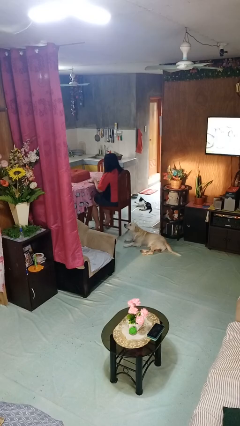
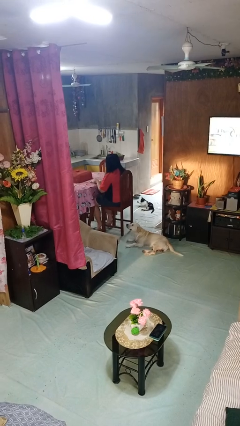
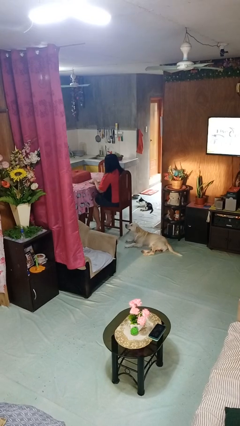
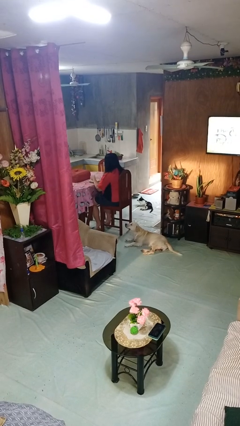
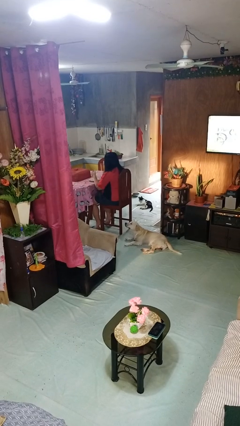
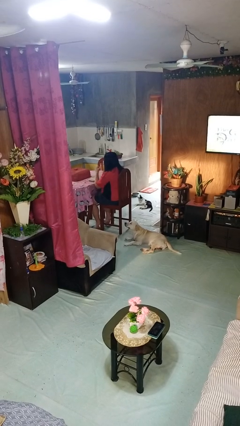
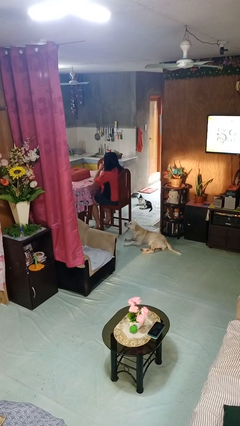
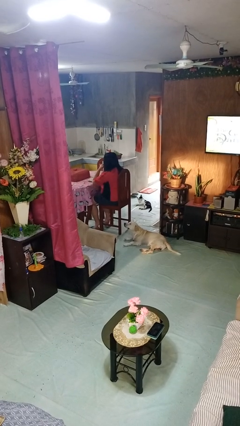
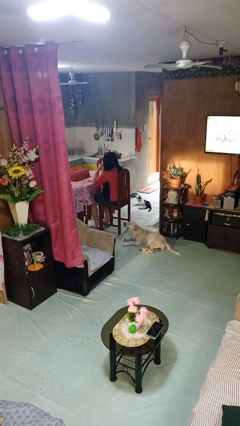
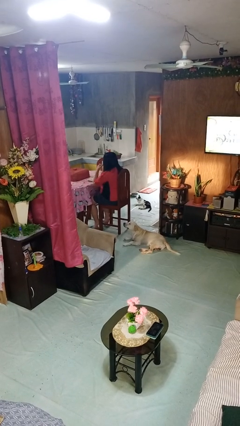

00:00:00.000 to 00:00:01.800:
person eats with hands

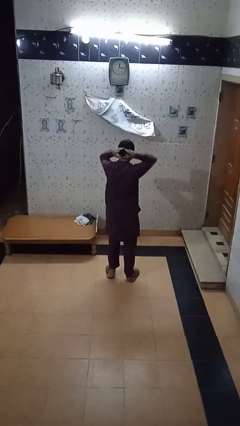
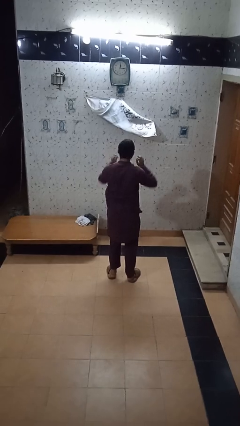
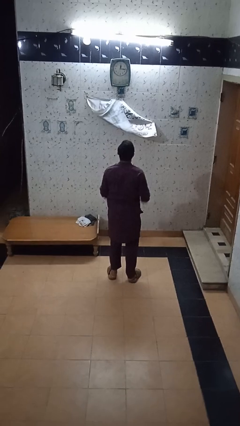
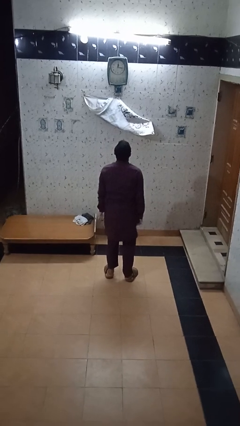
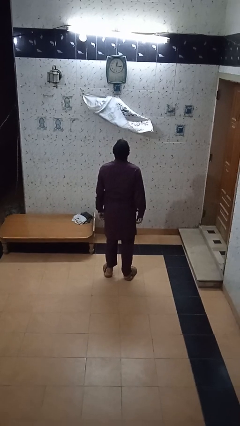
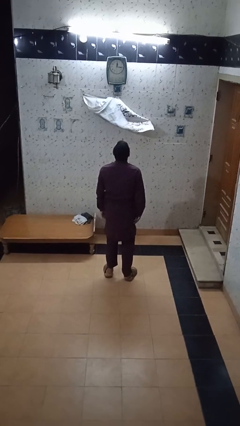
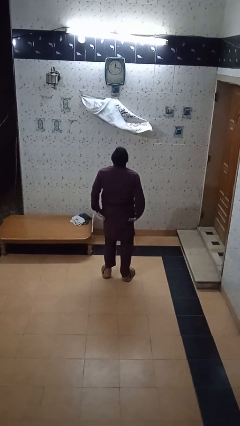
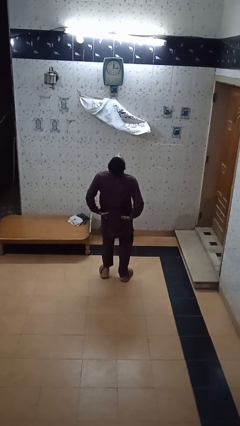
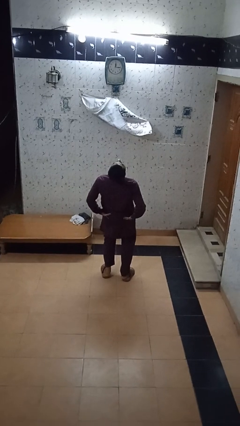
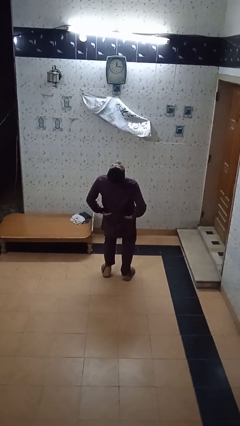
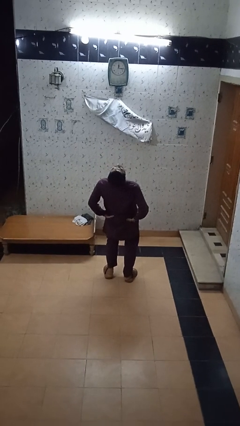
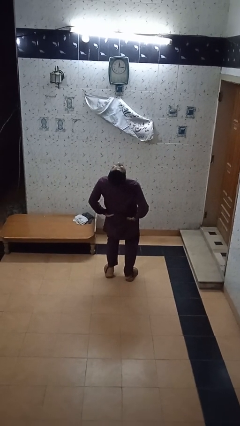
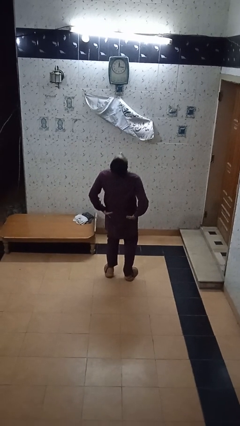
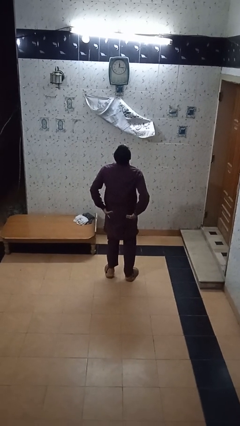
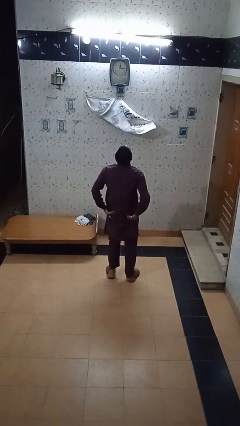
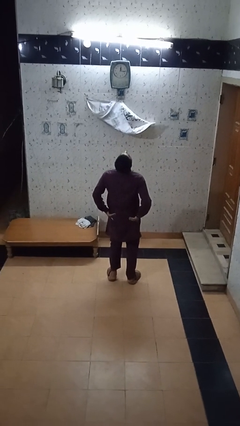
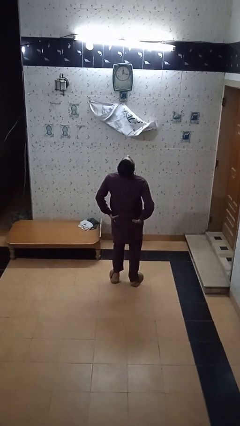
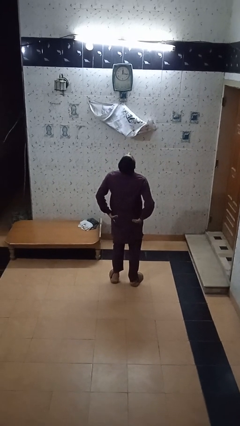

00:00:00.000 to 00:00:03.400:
person stretches back

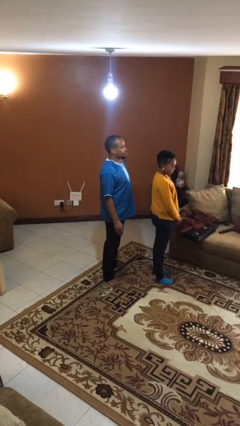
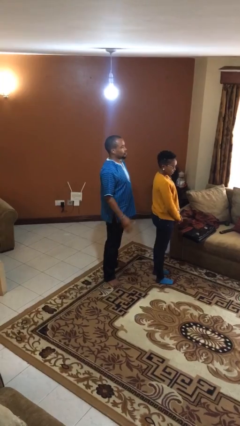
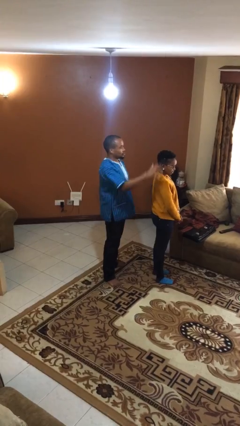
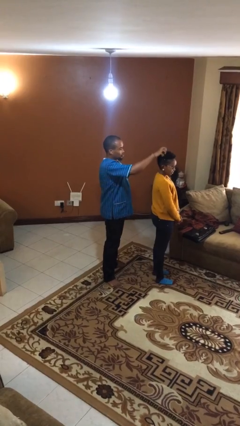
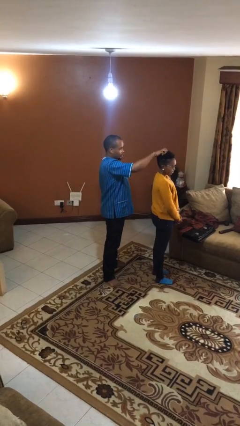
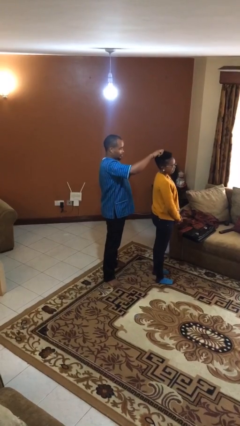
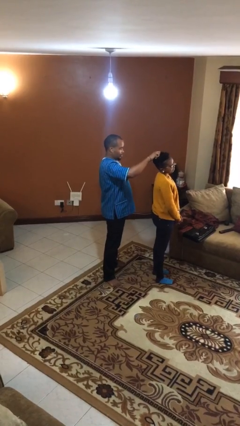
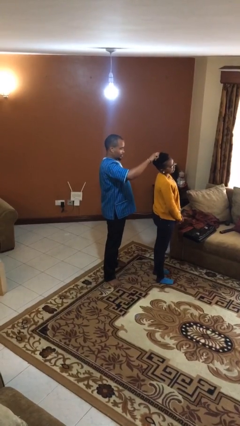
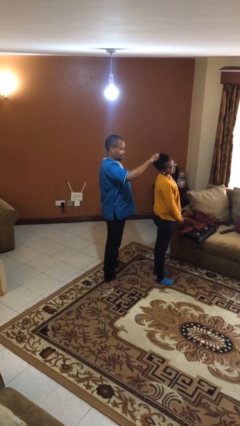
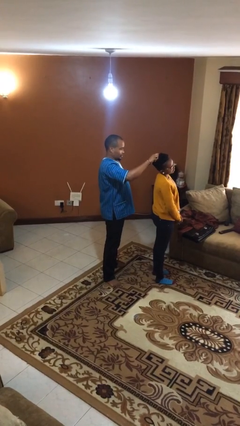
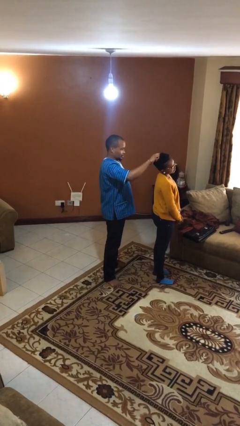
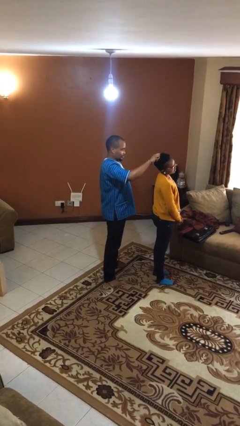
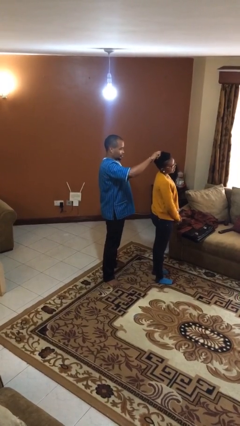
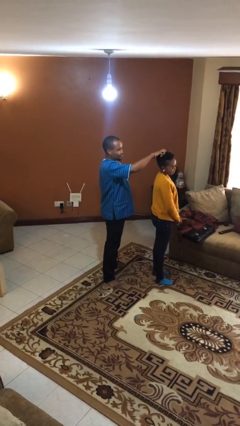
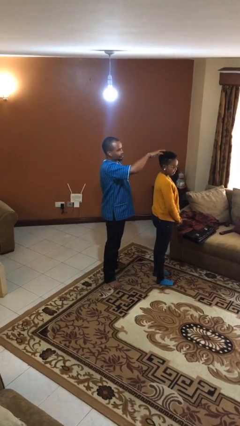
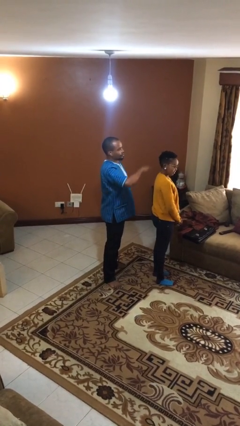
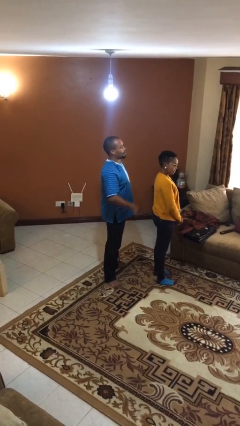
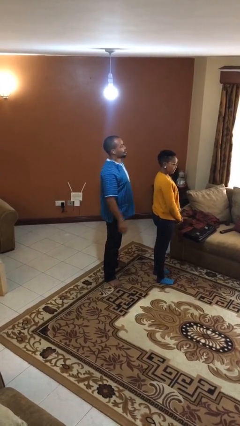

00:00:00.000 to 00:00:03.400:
person grabs person by hair

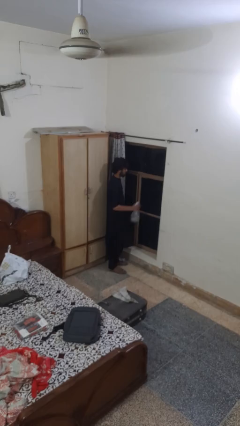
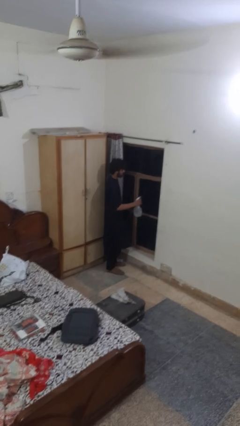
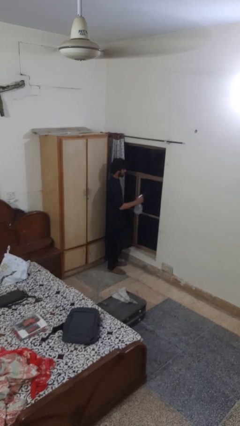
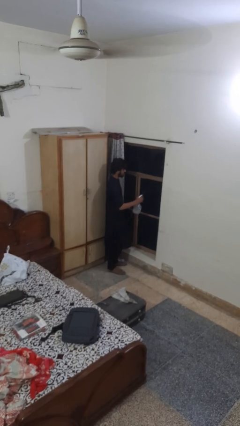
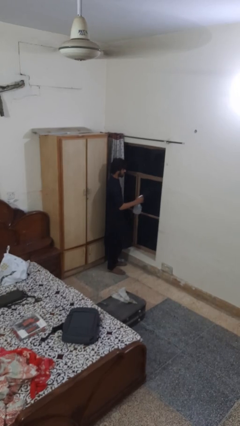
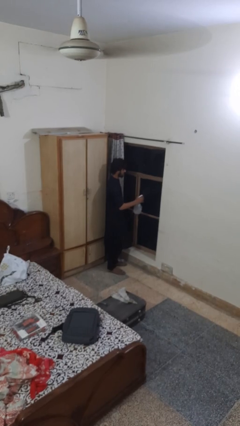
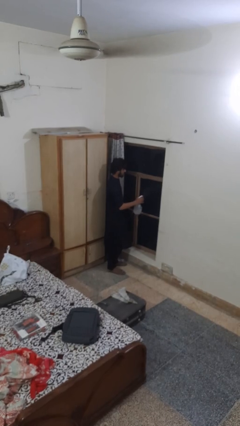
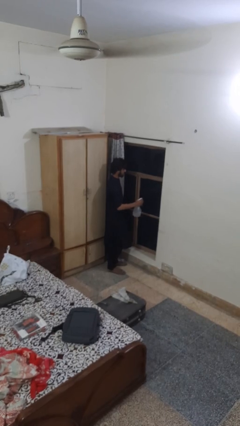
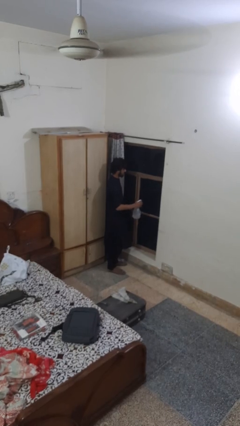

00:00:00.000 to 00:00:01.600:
person sprays from bottle

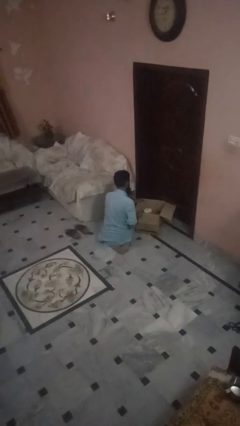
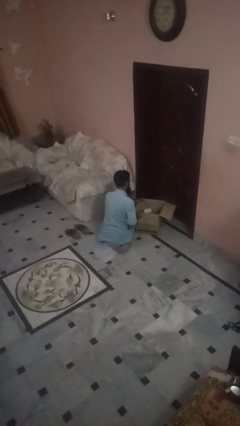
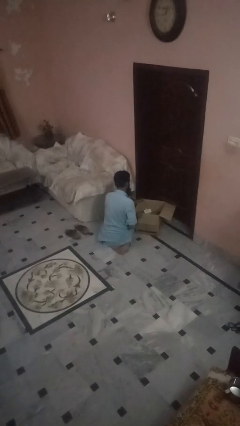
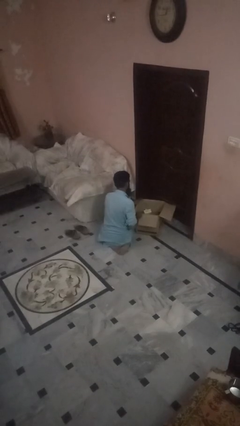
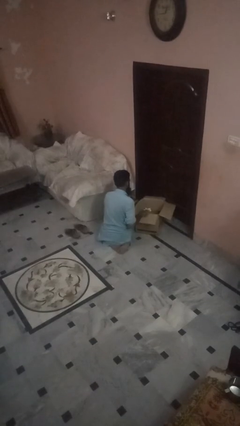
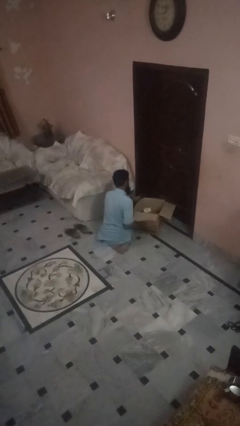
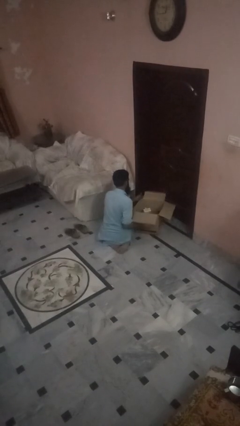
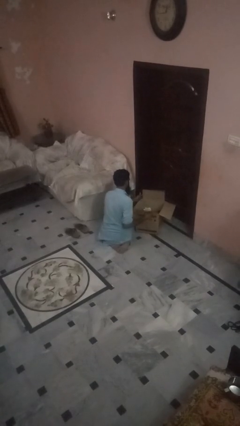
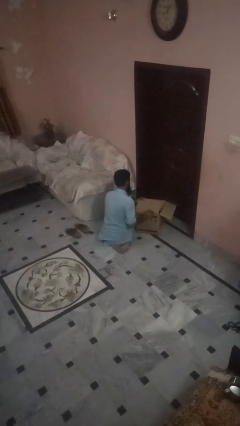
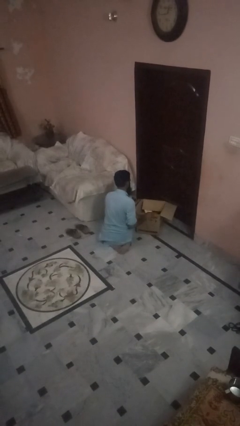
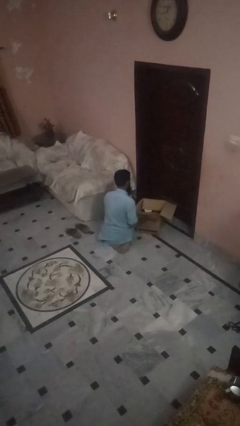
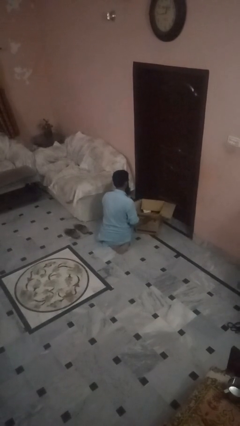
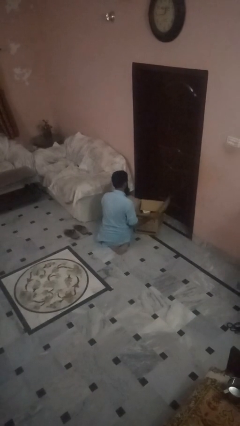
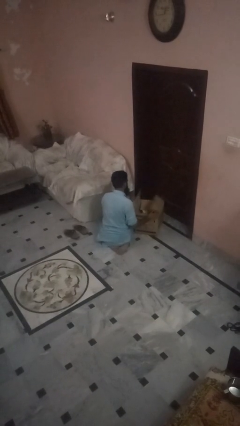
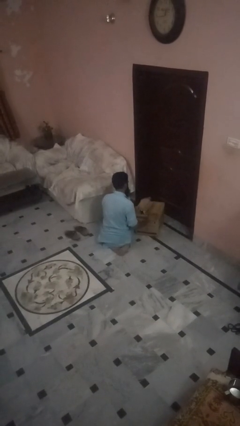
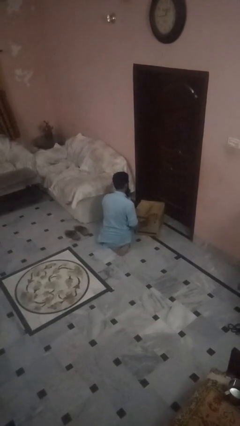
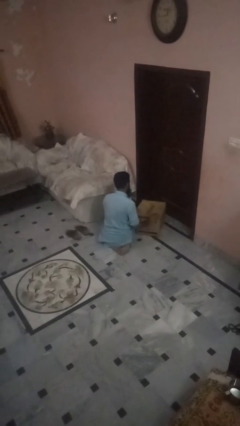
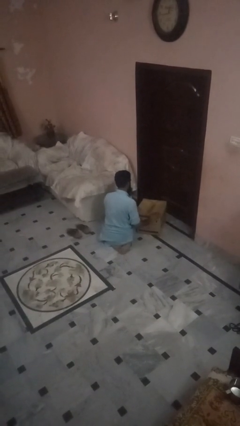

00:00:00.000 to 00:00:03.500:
person closes box

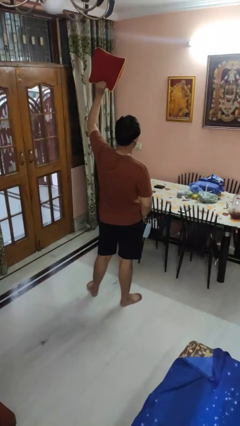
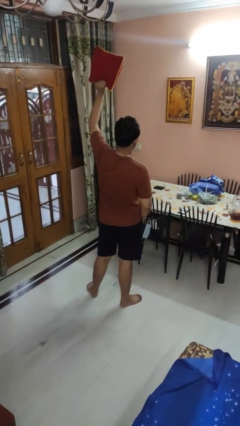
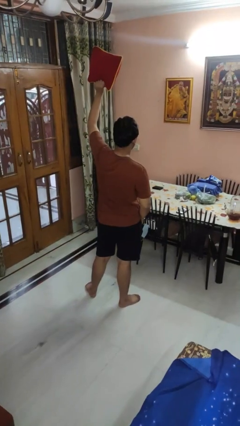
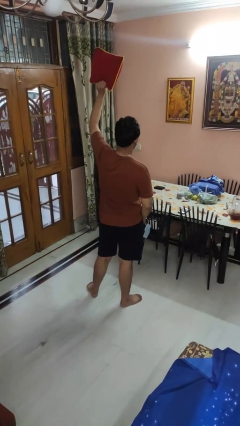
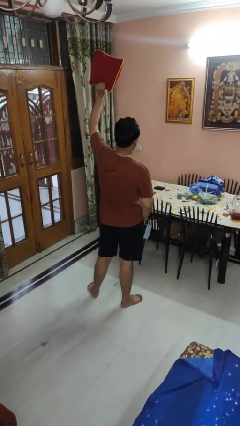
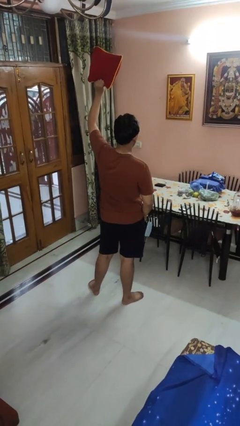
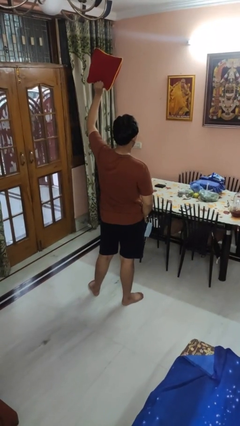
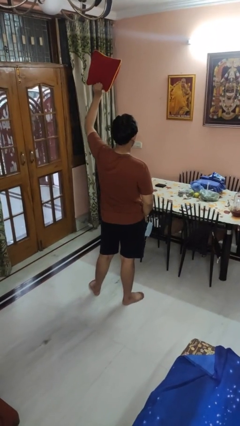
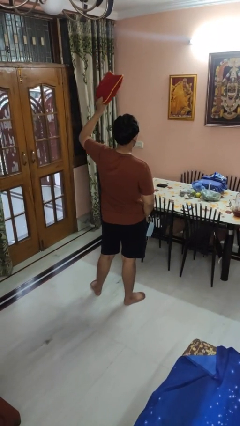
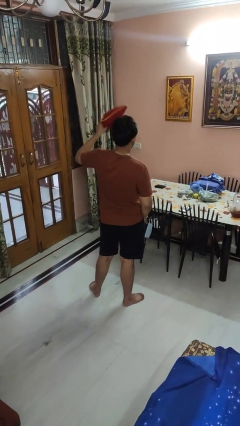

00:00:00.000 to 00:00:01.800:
person holds object above head

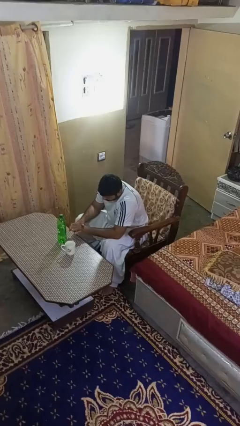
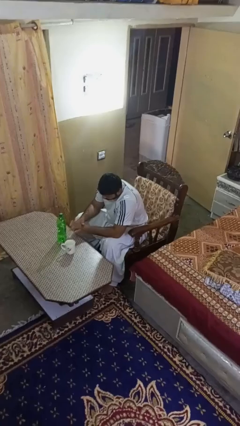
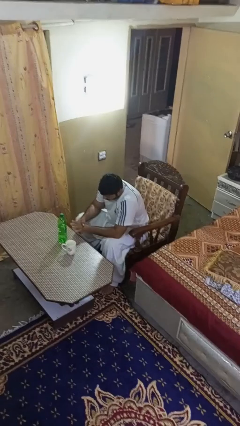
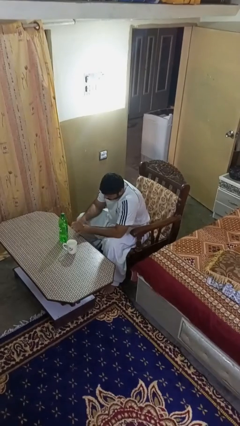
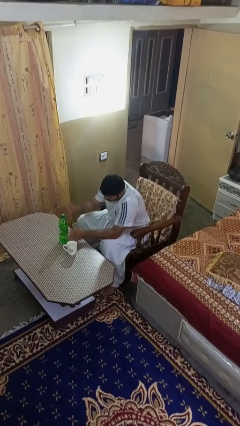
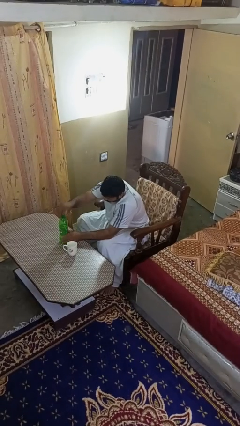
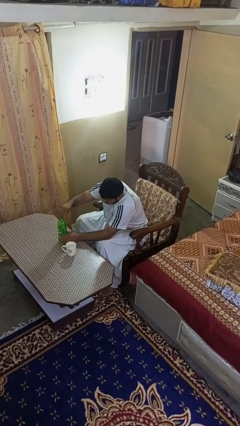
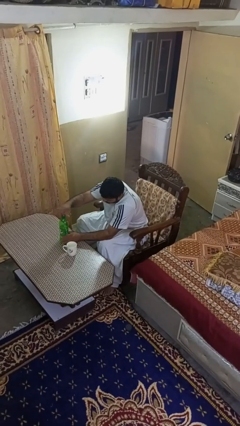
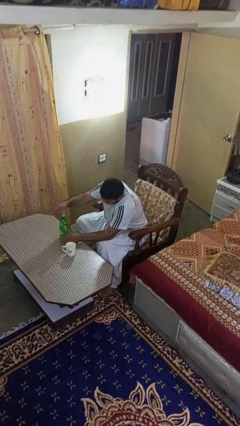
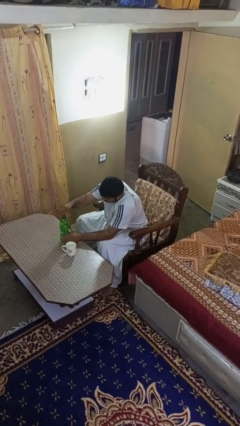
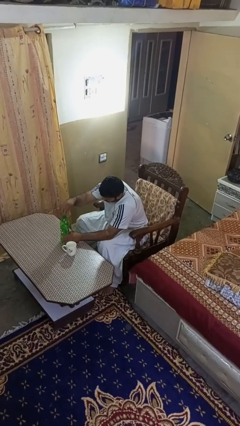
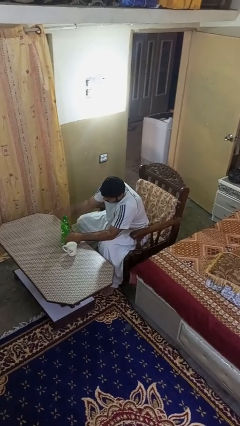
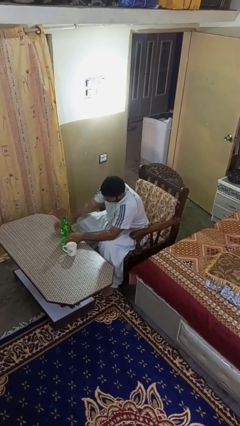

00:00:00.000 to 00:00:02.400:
person unscrews lid from bottle
